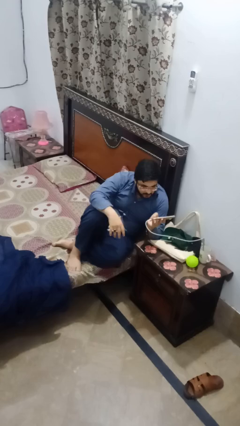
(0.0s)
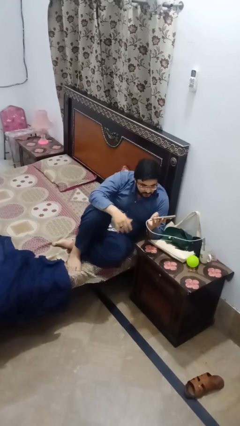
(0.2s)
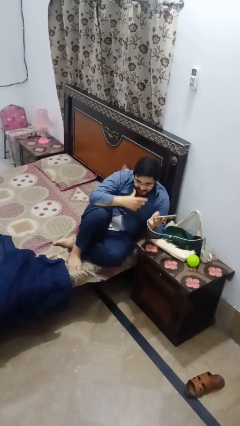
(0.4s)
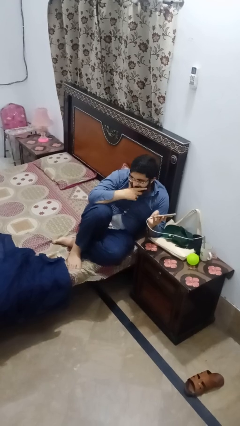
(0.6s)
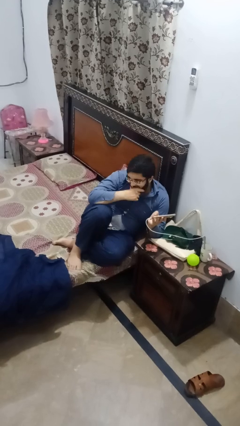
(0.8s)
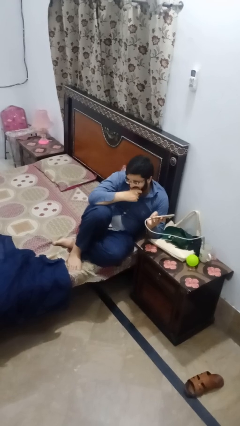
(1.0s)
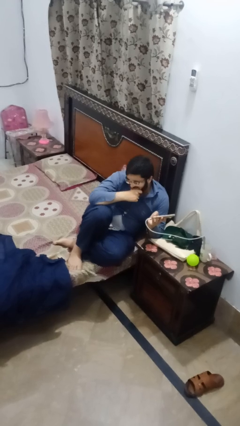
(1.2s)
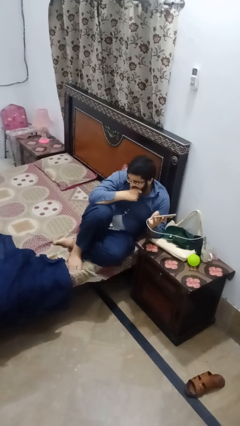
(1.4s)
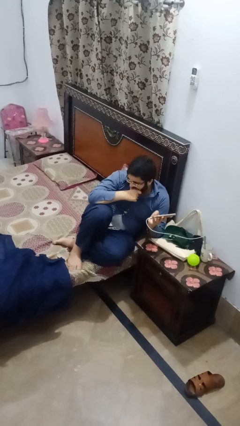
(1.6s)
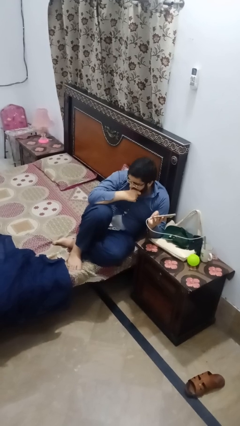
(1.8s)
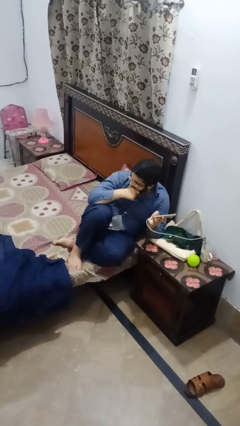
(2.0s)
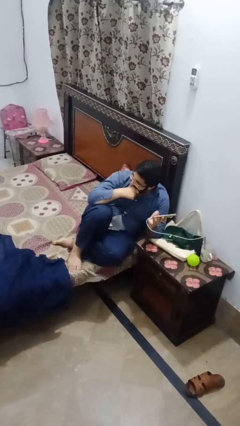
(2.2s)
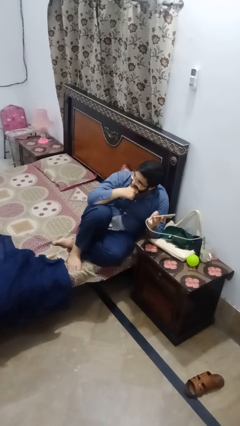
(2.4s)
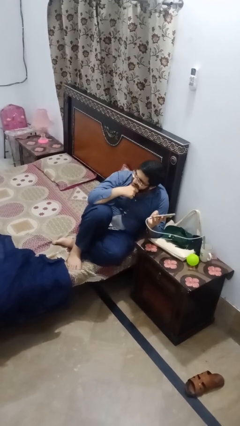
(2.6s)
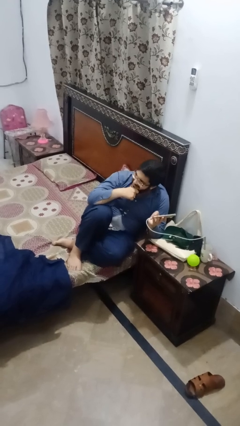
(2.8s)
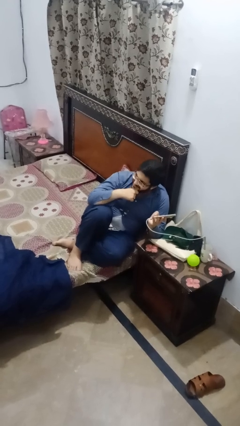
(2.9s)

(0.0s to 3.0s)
person strokes chin

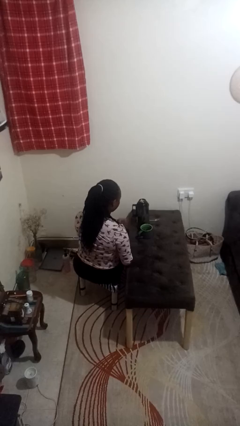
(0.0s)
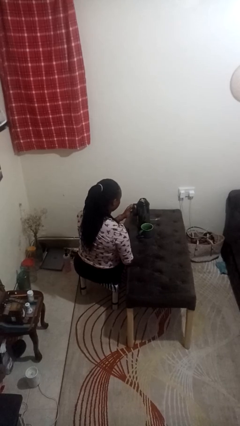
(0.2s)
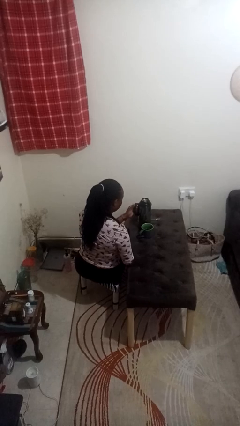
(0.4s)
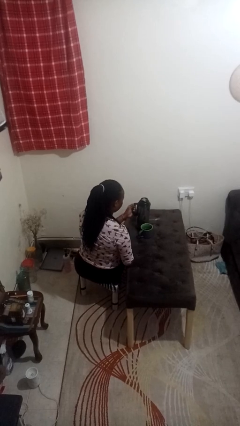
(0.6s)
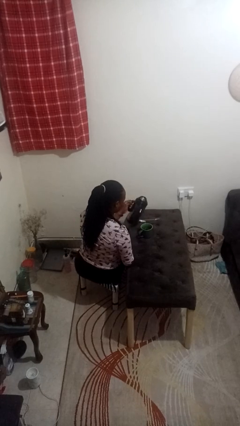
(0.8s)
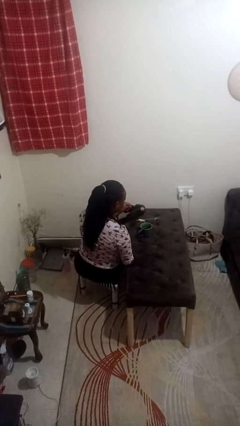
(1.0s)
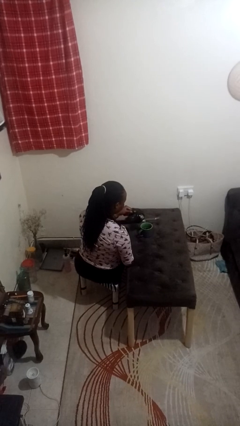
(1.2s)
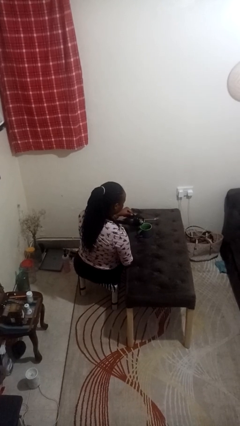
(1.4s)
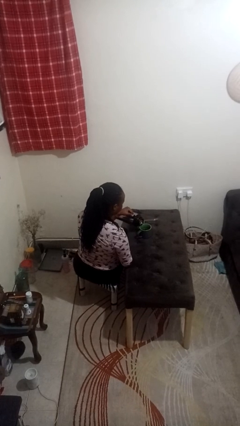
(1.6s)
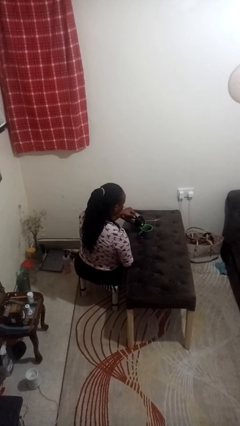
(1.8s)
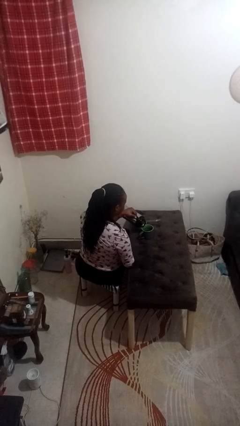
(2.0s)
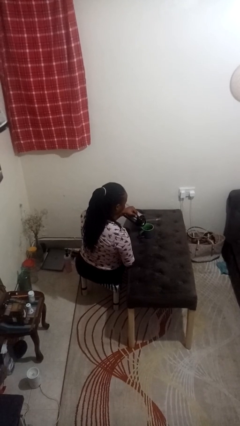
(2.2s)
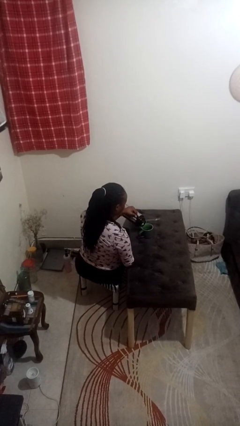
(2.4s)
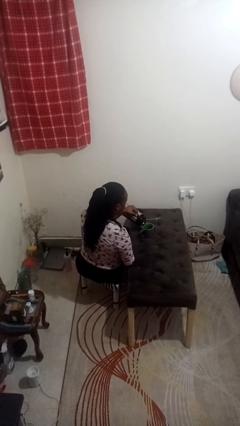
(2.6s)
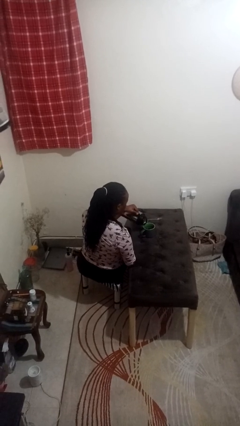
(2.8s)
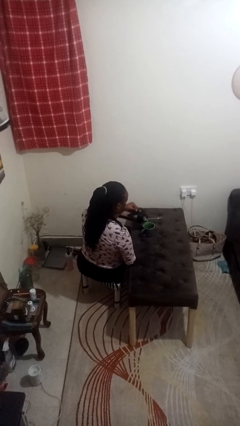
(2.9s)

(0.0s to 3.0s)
person pours coffee into mug

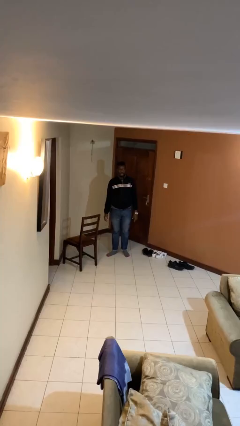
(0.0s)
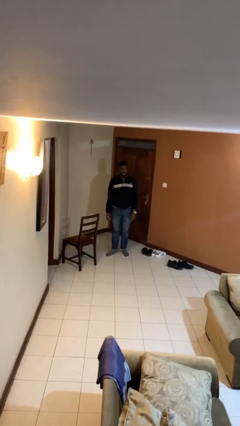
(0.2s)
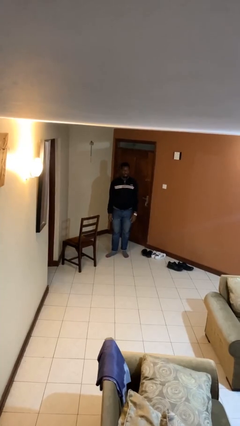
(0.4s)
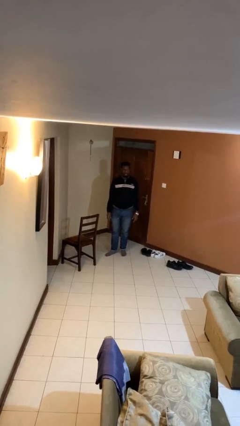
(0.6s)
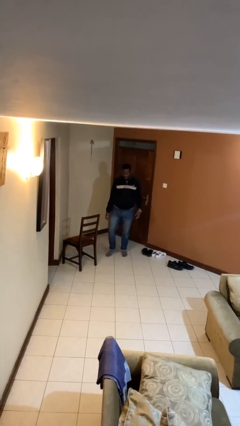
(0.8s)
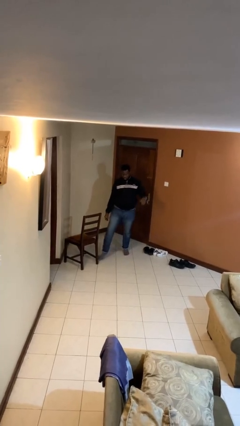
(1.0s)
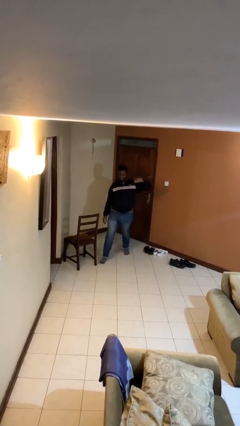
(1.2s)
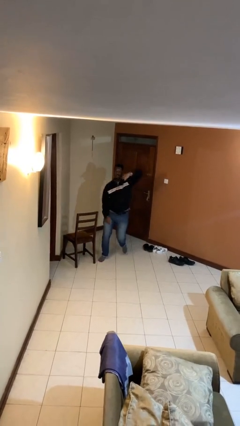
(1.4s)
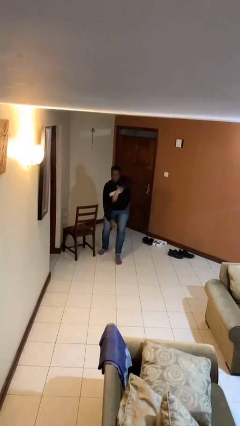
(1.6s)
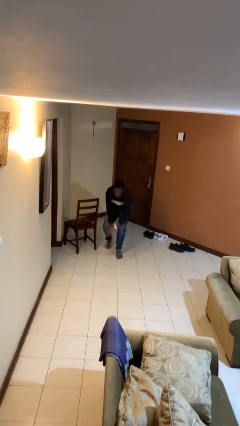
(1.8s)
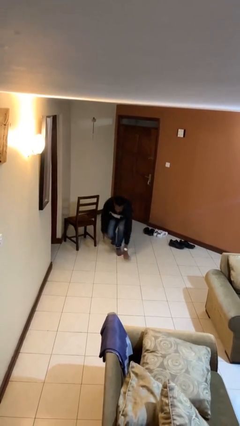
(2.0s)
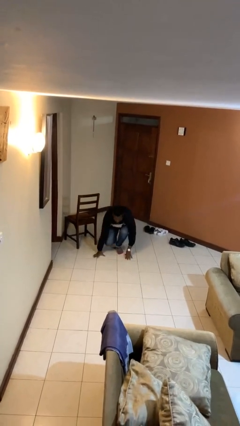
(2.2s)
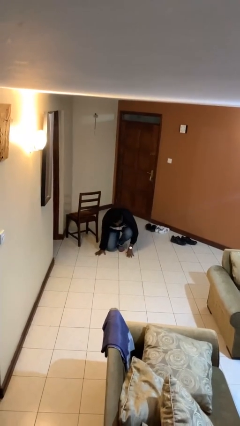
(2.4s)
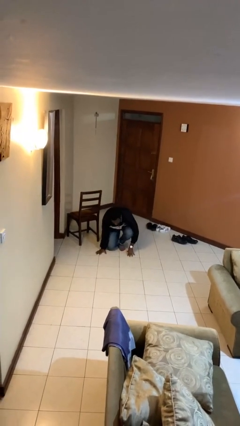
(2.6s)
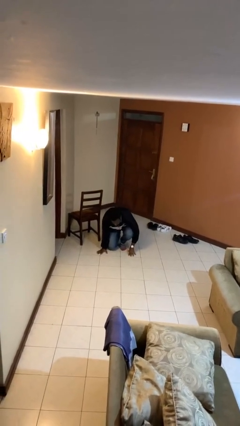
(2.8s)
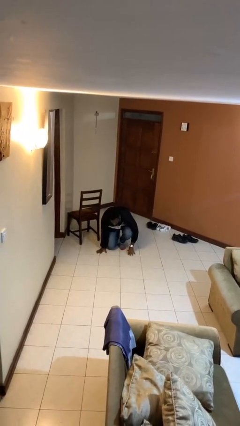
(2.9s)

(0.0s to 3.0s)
person trips on object on floor

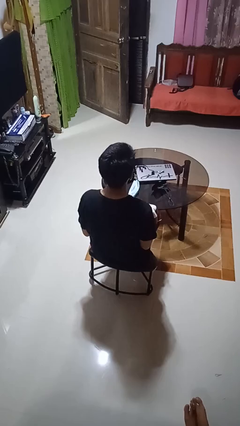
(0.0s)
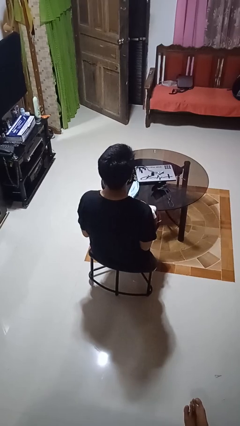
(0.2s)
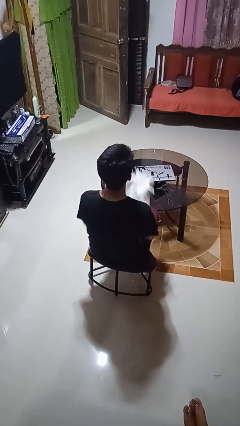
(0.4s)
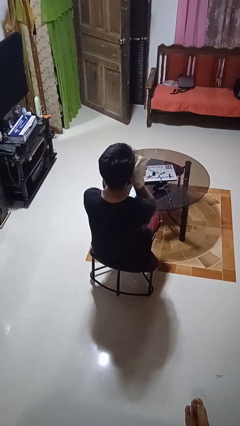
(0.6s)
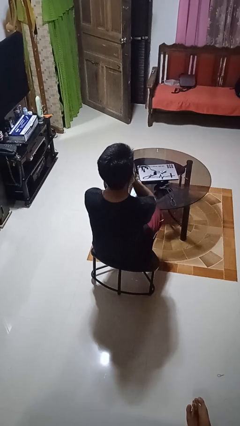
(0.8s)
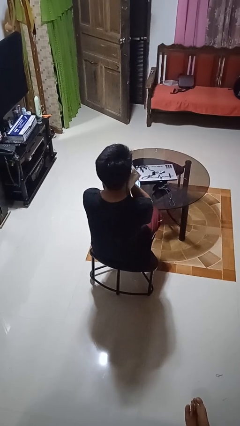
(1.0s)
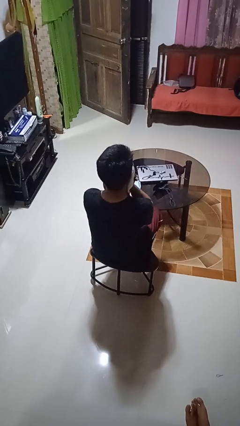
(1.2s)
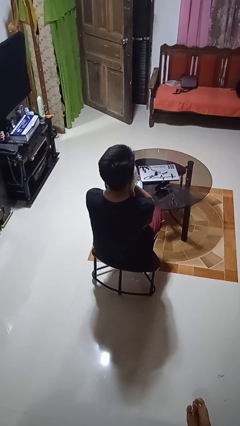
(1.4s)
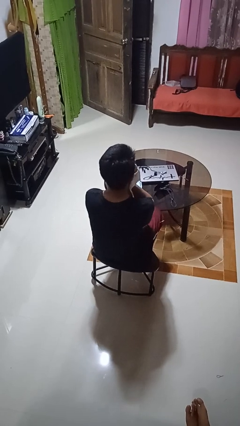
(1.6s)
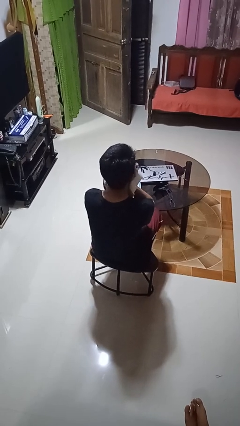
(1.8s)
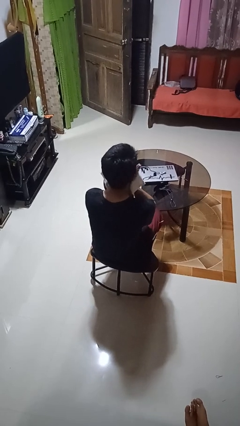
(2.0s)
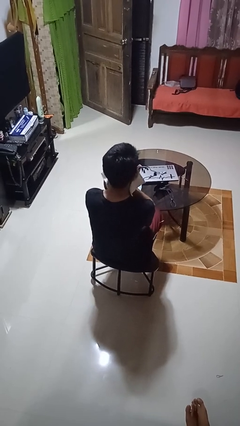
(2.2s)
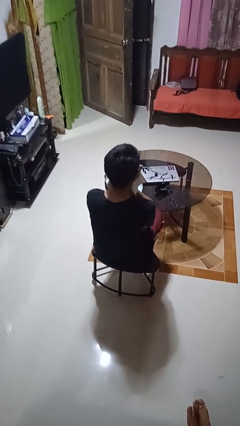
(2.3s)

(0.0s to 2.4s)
person wipes mouth with napkin

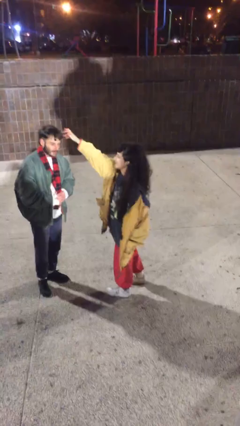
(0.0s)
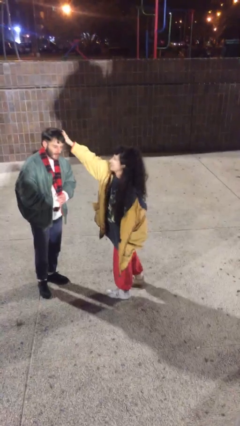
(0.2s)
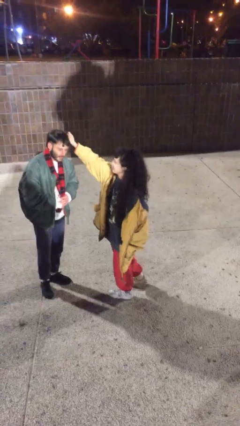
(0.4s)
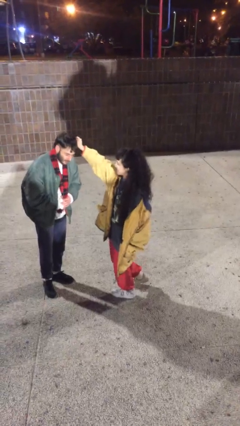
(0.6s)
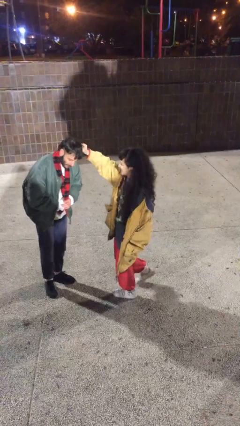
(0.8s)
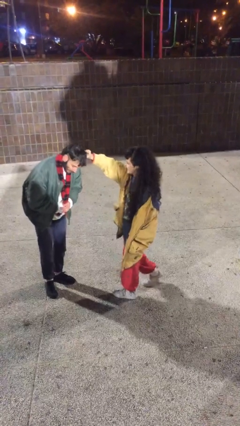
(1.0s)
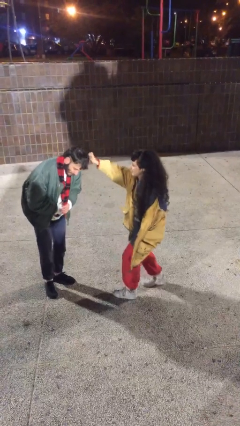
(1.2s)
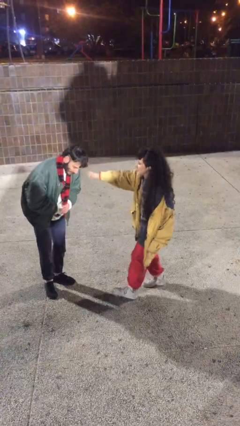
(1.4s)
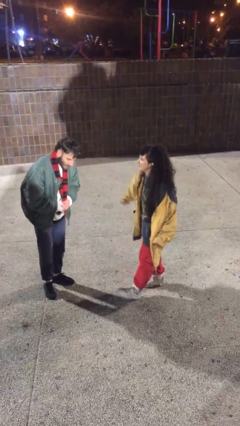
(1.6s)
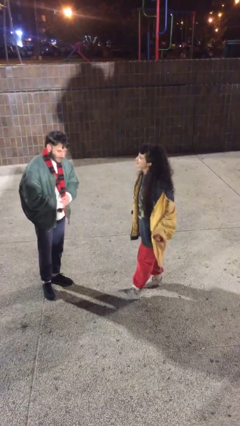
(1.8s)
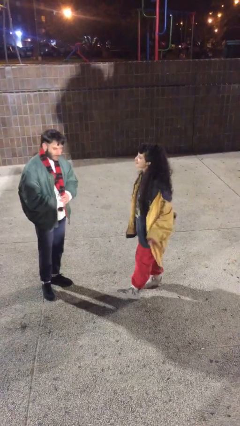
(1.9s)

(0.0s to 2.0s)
person grabs person by hair

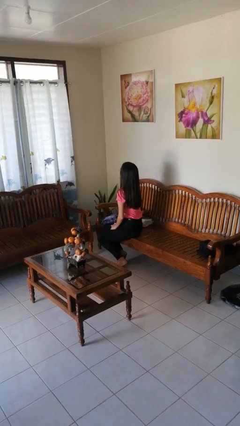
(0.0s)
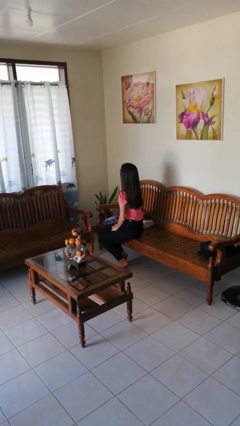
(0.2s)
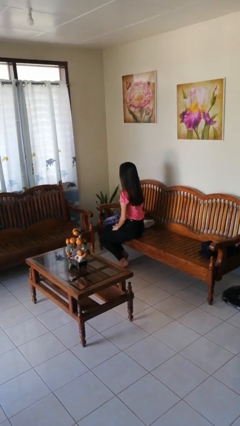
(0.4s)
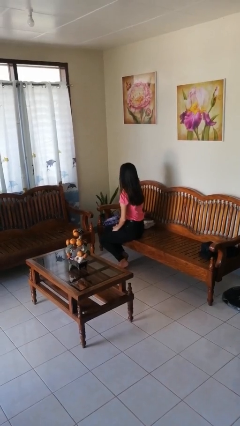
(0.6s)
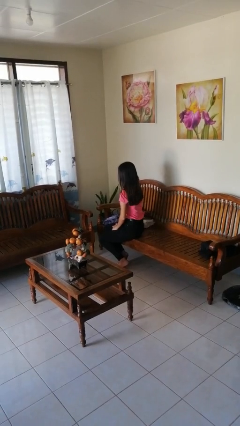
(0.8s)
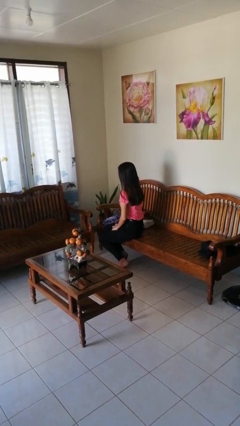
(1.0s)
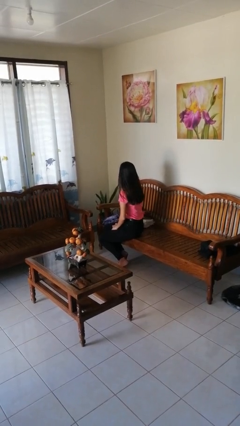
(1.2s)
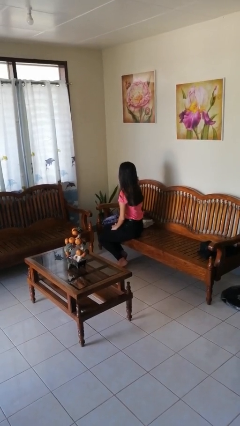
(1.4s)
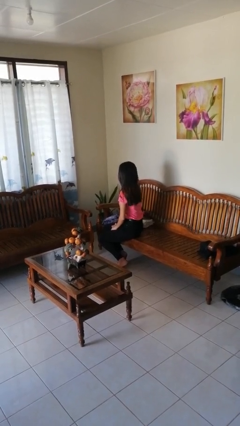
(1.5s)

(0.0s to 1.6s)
person shakes head

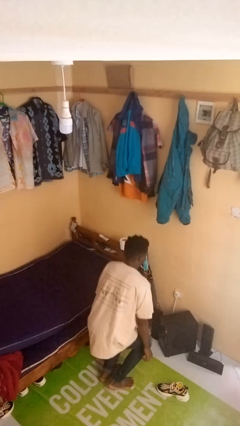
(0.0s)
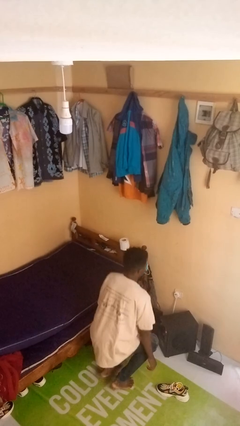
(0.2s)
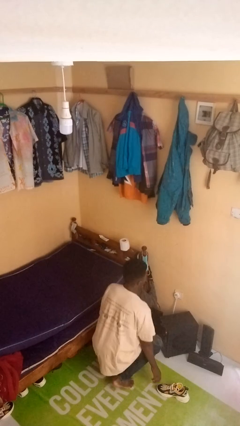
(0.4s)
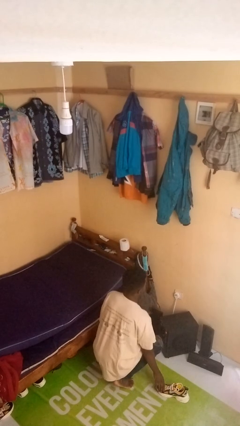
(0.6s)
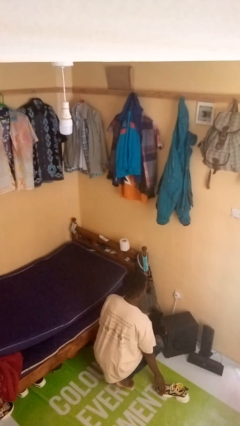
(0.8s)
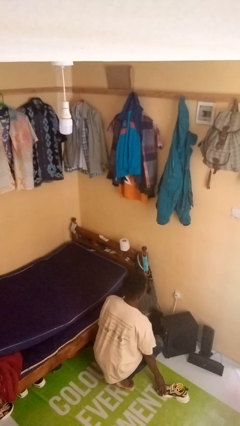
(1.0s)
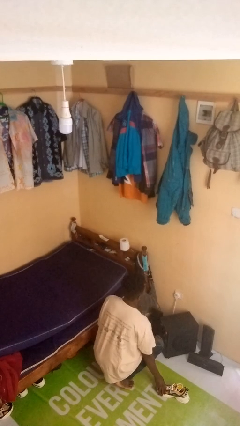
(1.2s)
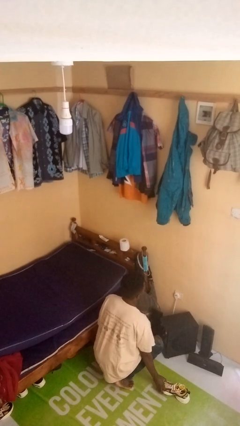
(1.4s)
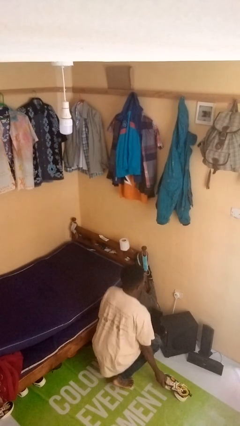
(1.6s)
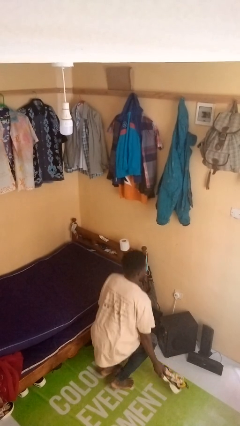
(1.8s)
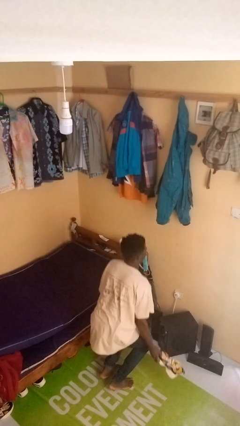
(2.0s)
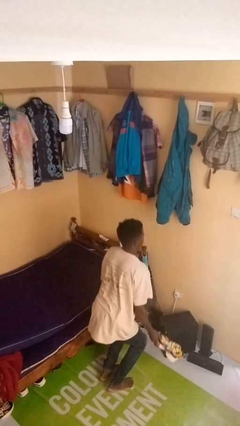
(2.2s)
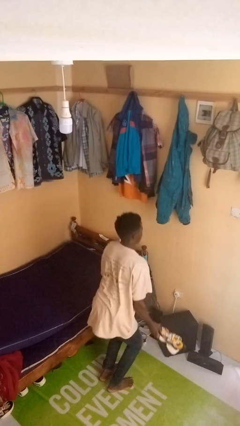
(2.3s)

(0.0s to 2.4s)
person picks up object from floor
